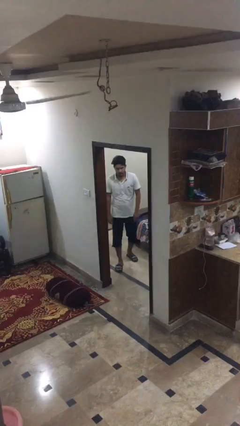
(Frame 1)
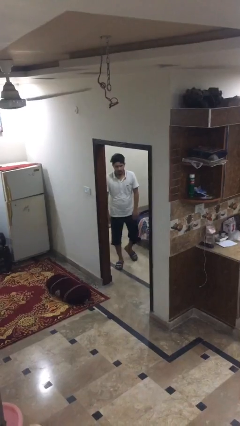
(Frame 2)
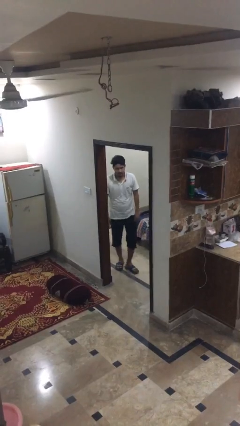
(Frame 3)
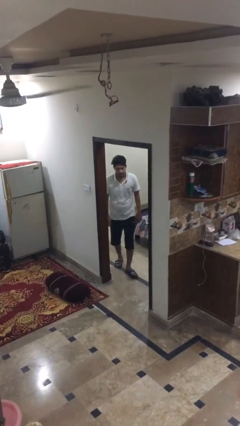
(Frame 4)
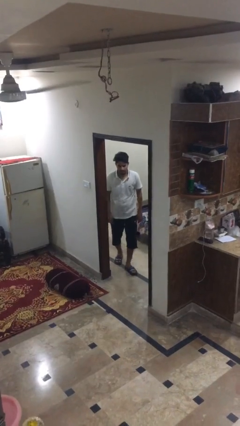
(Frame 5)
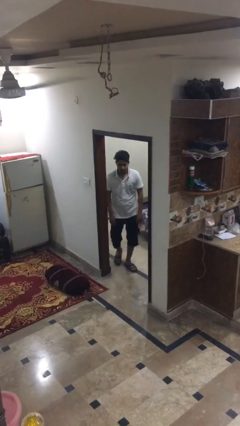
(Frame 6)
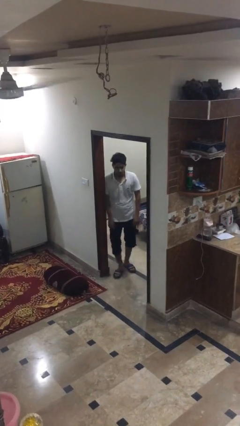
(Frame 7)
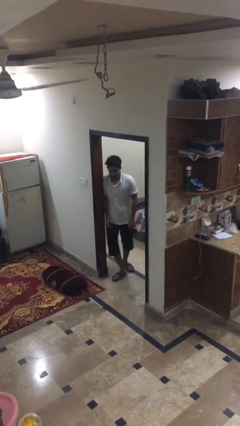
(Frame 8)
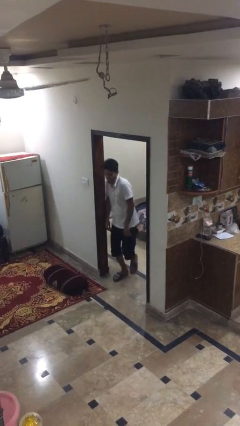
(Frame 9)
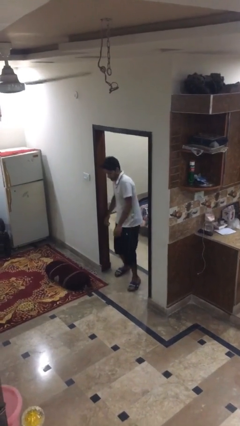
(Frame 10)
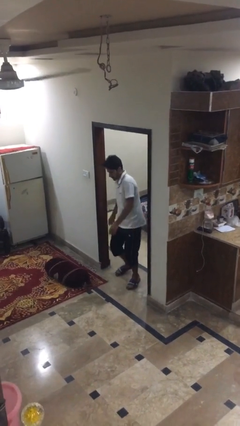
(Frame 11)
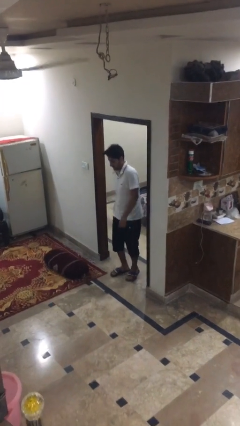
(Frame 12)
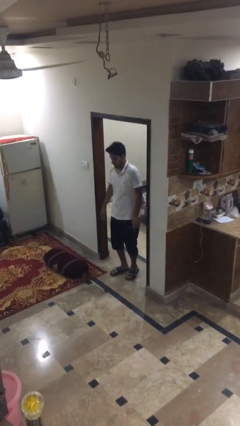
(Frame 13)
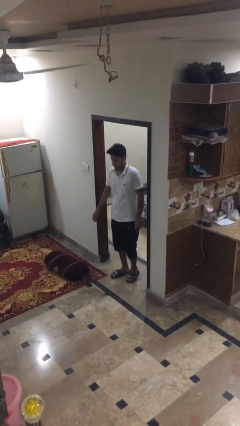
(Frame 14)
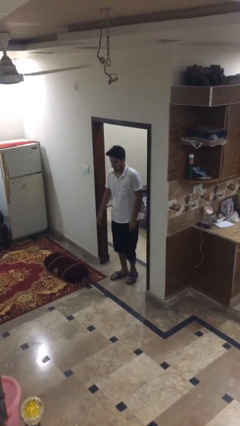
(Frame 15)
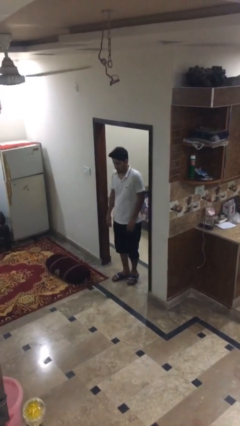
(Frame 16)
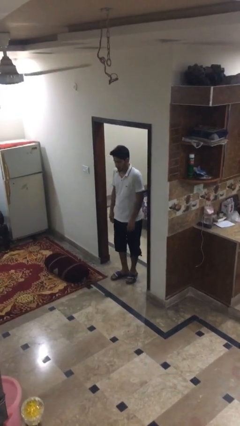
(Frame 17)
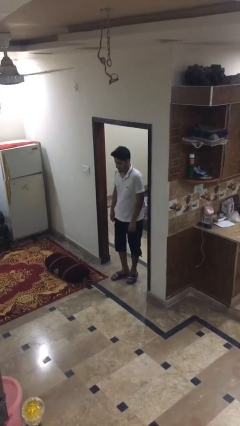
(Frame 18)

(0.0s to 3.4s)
person bumps into wall

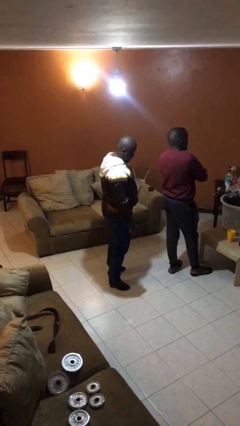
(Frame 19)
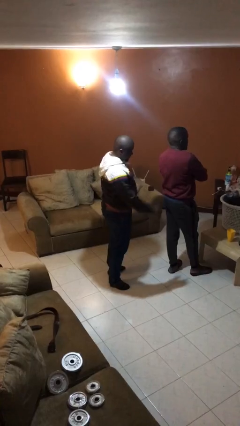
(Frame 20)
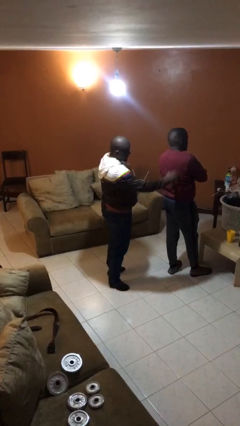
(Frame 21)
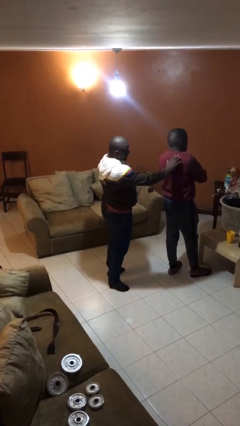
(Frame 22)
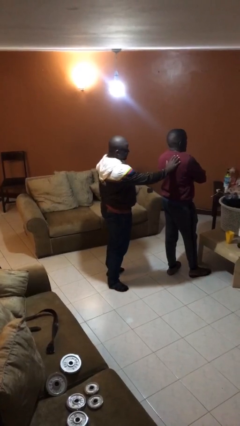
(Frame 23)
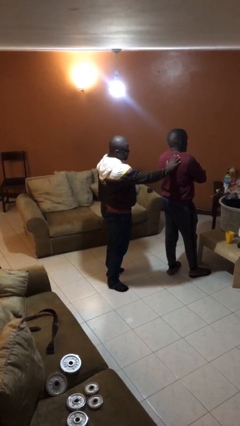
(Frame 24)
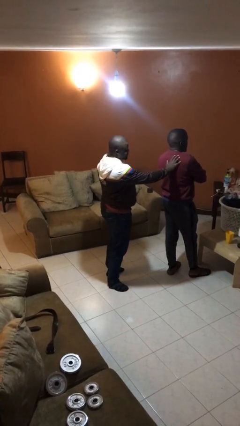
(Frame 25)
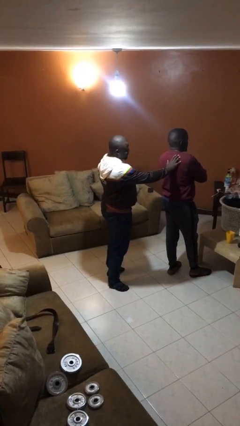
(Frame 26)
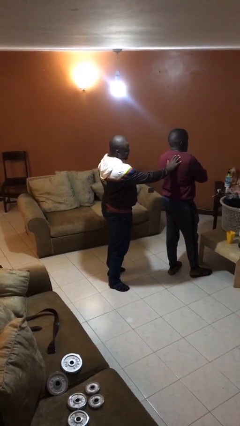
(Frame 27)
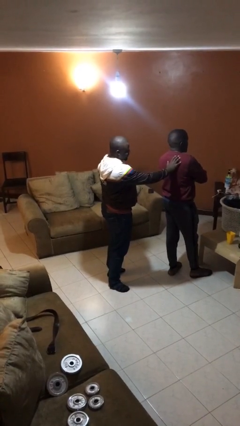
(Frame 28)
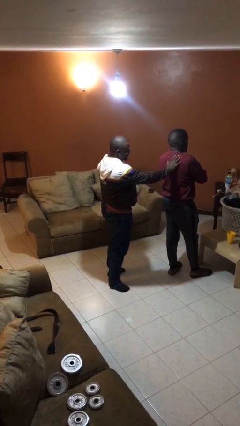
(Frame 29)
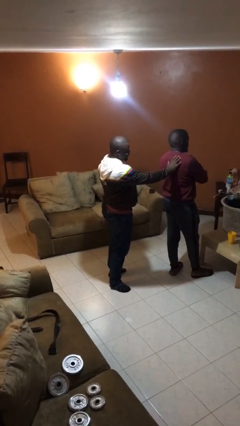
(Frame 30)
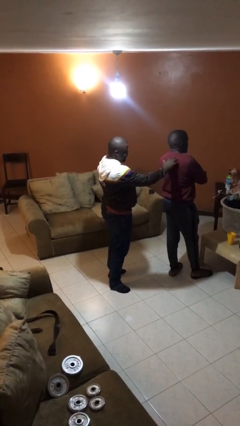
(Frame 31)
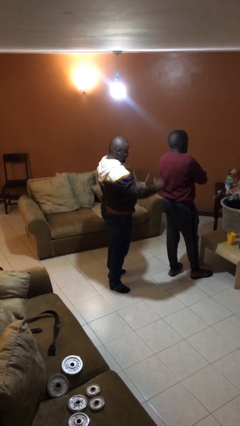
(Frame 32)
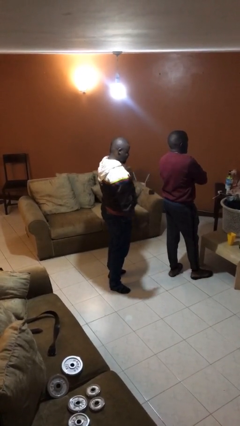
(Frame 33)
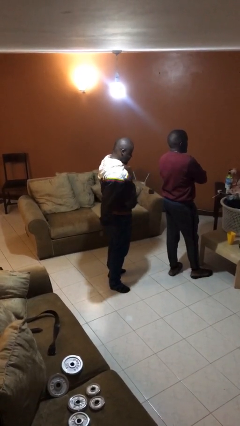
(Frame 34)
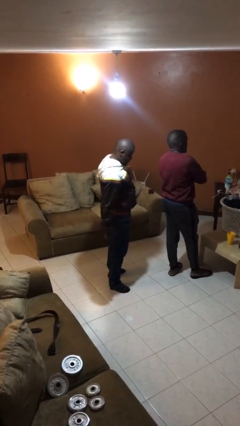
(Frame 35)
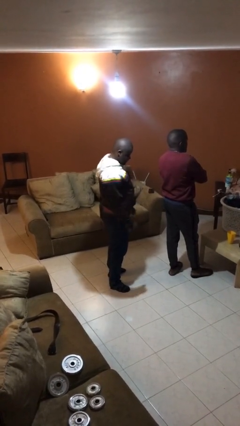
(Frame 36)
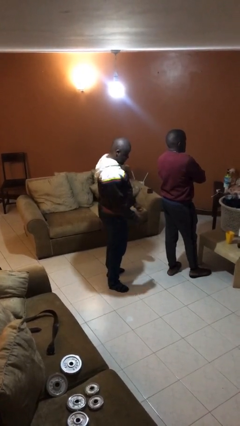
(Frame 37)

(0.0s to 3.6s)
person touches back of person

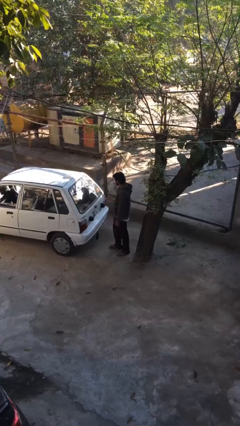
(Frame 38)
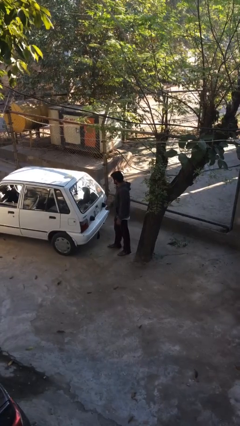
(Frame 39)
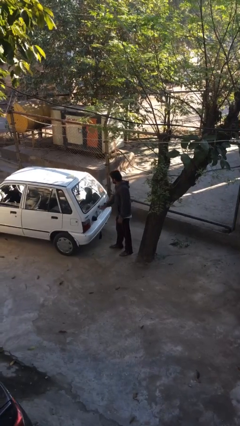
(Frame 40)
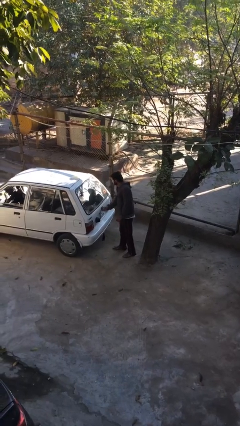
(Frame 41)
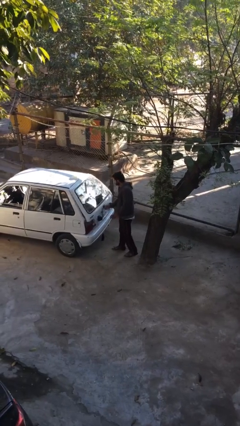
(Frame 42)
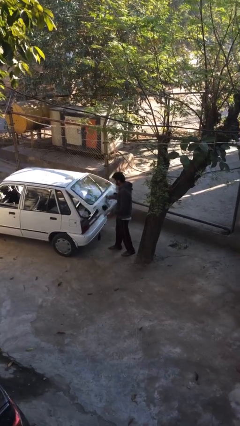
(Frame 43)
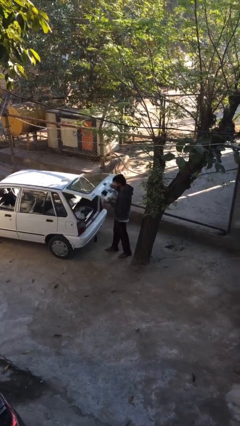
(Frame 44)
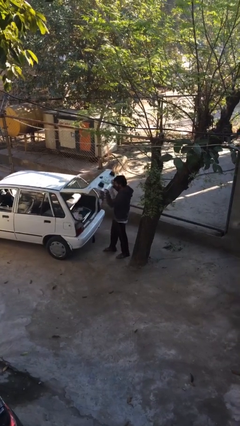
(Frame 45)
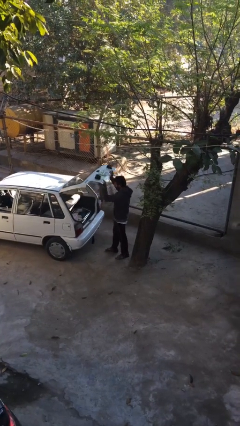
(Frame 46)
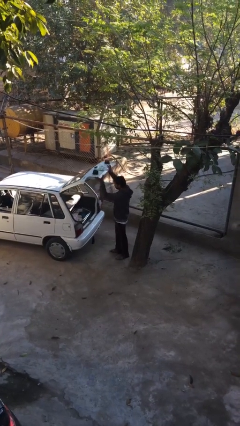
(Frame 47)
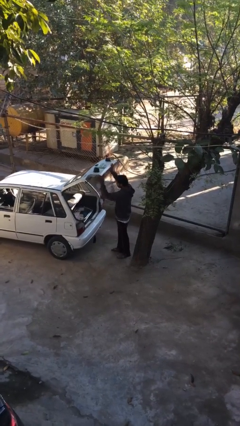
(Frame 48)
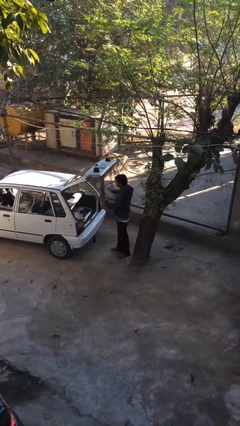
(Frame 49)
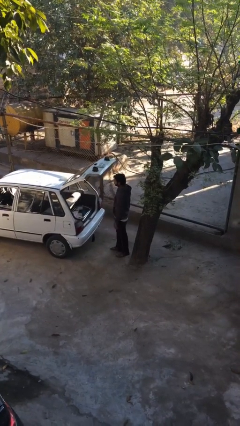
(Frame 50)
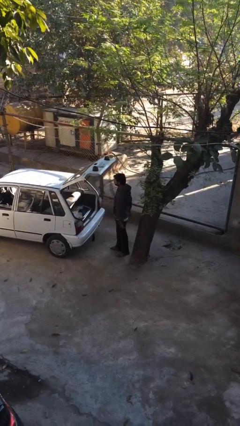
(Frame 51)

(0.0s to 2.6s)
person opens car trunk

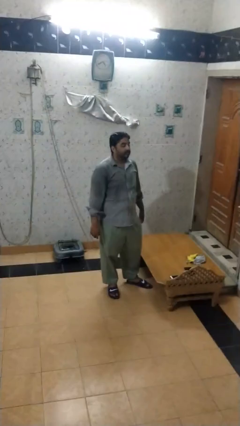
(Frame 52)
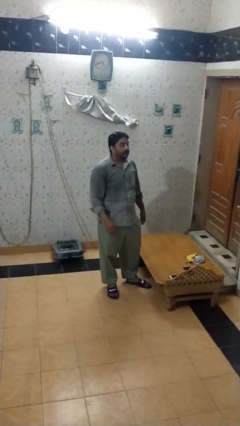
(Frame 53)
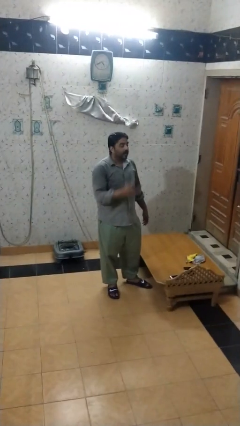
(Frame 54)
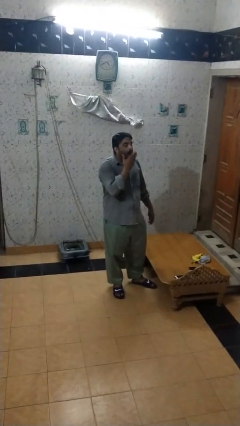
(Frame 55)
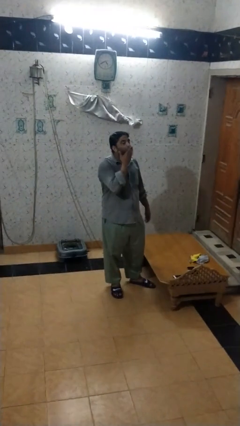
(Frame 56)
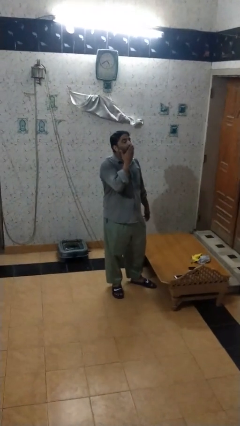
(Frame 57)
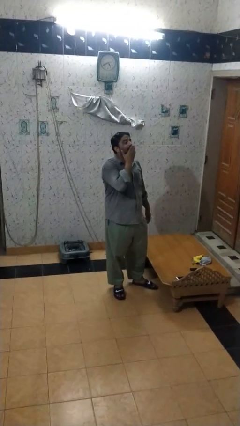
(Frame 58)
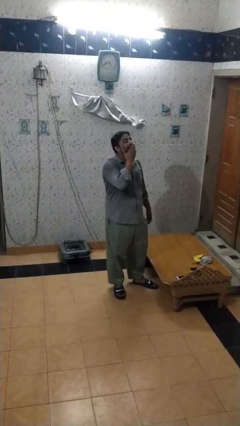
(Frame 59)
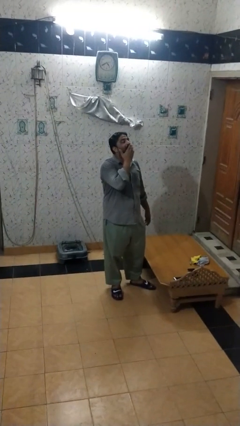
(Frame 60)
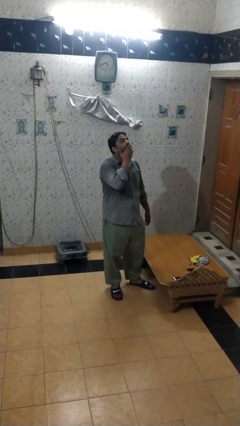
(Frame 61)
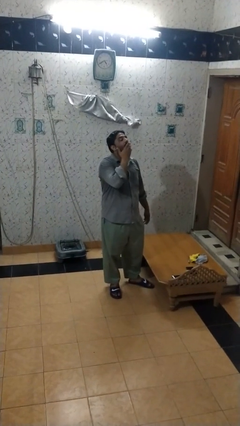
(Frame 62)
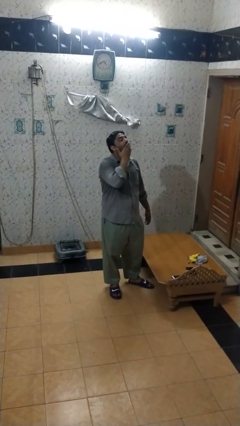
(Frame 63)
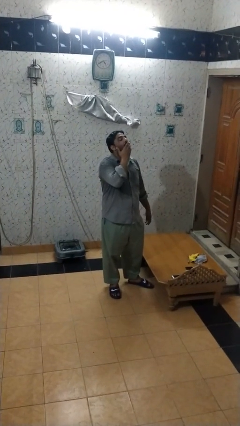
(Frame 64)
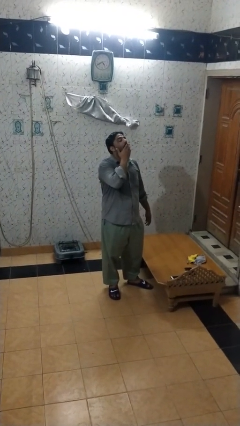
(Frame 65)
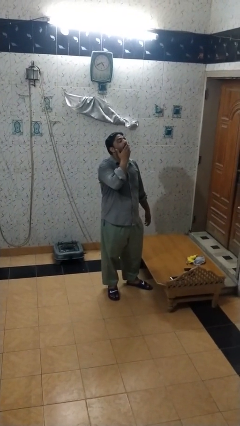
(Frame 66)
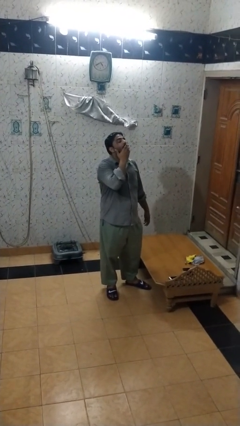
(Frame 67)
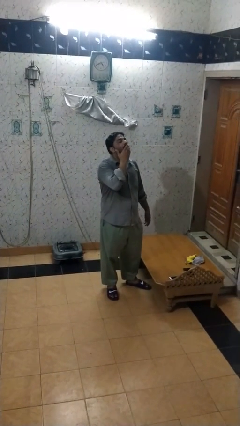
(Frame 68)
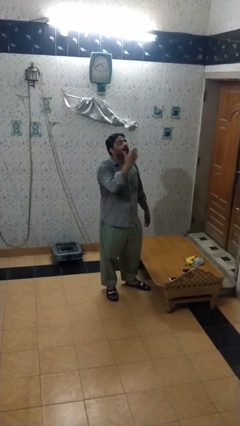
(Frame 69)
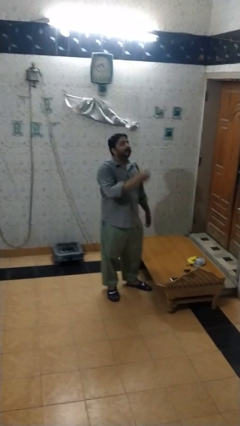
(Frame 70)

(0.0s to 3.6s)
person yawns

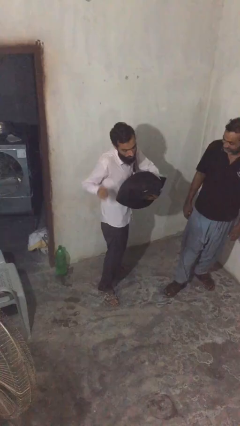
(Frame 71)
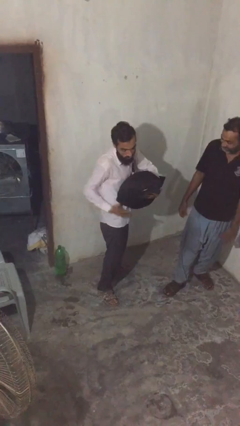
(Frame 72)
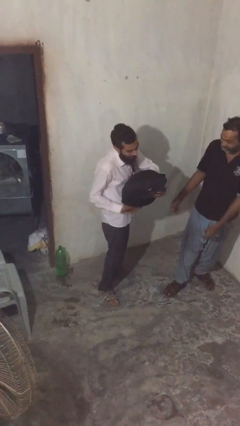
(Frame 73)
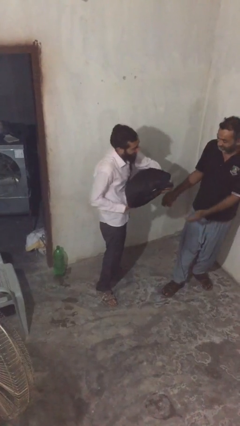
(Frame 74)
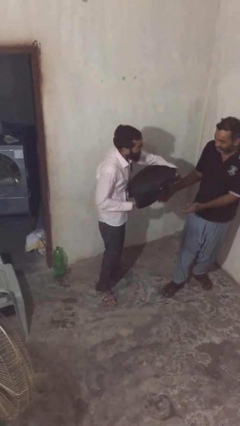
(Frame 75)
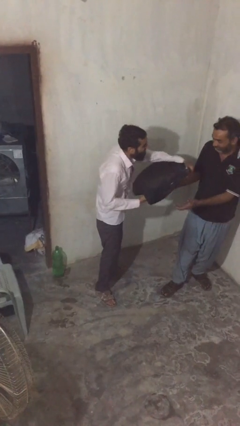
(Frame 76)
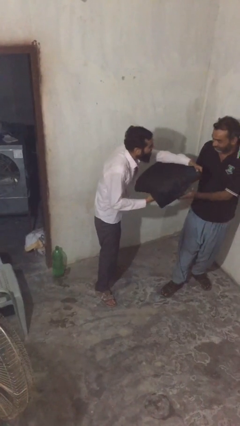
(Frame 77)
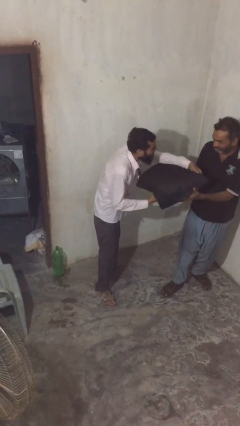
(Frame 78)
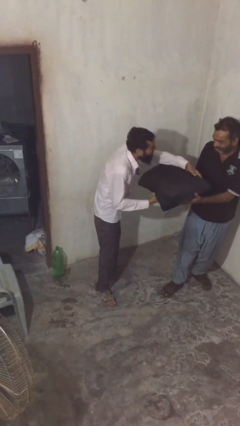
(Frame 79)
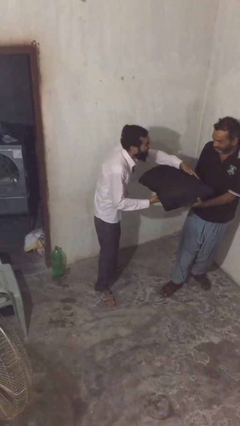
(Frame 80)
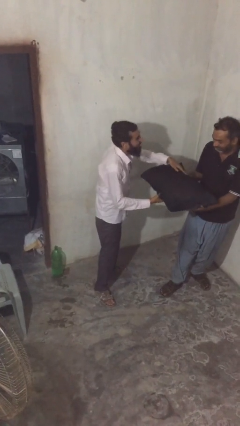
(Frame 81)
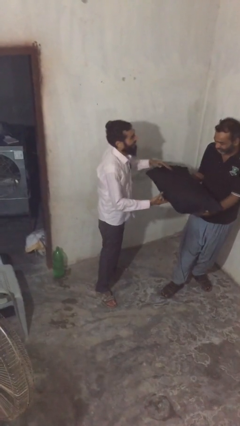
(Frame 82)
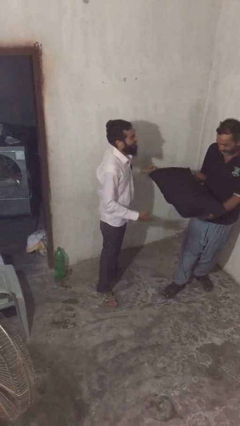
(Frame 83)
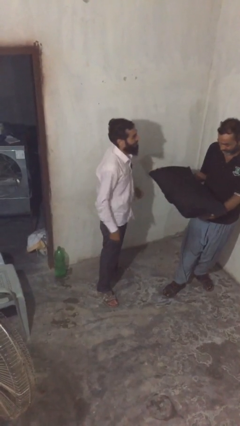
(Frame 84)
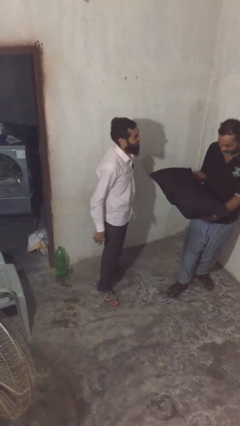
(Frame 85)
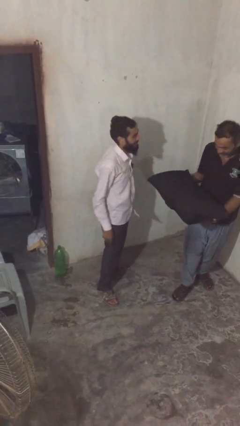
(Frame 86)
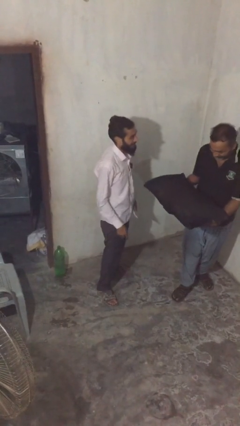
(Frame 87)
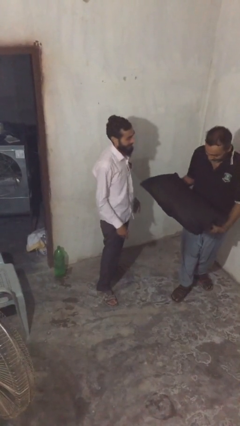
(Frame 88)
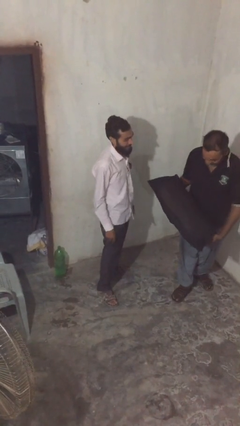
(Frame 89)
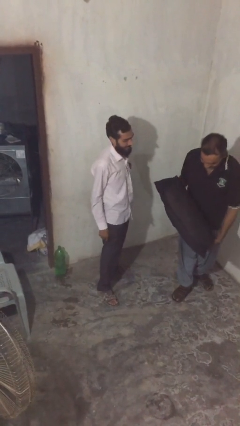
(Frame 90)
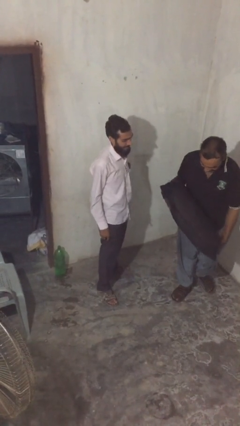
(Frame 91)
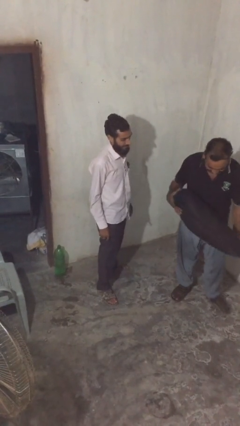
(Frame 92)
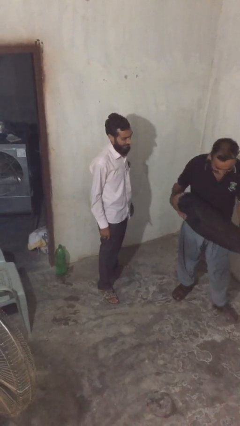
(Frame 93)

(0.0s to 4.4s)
person transfers object to person
